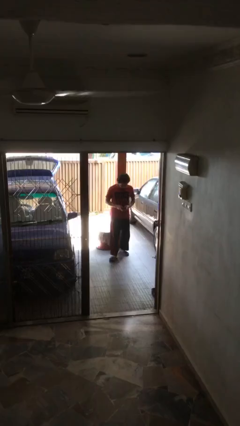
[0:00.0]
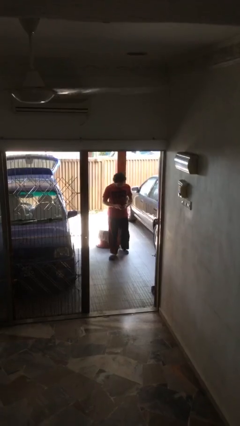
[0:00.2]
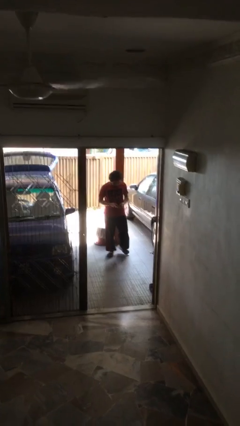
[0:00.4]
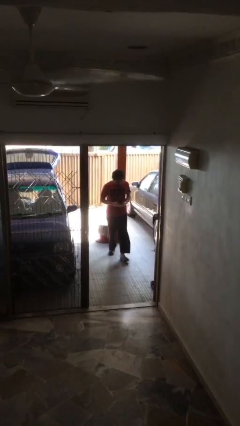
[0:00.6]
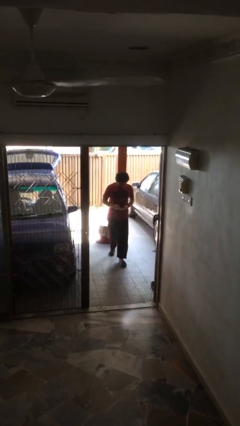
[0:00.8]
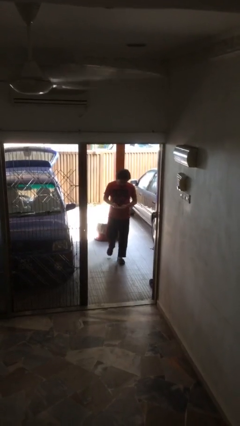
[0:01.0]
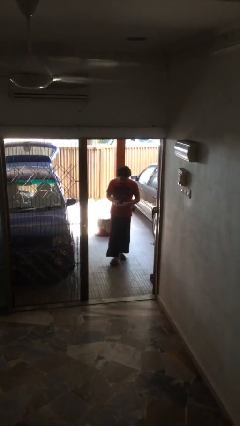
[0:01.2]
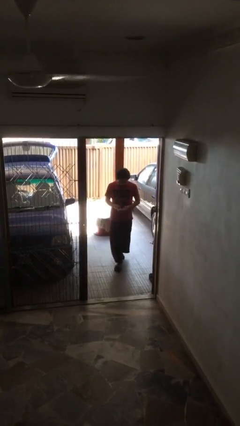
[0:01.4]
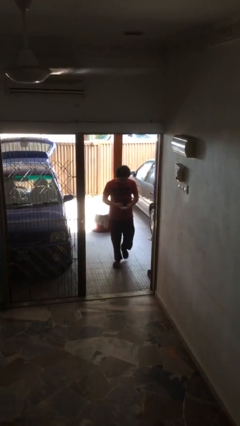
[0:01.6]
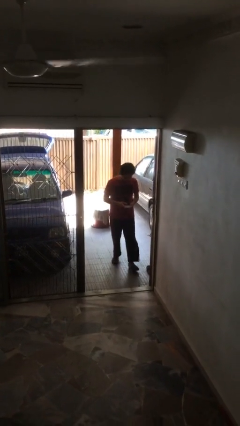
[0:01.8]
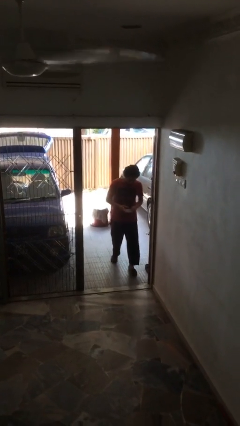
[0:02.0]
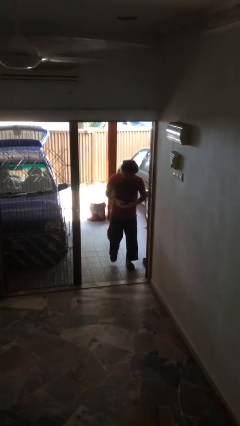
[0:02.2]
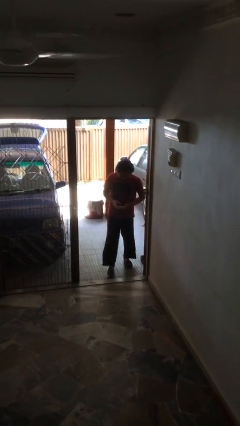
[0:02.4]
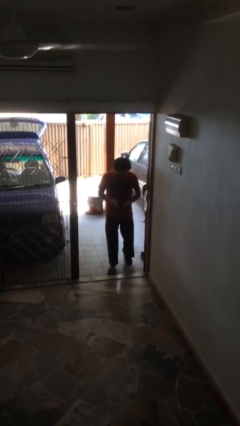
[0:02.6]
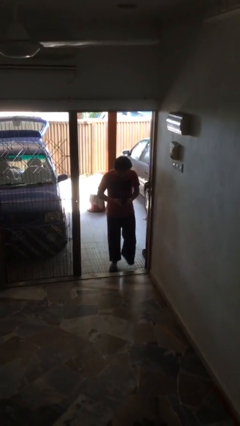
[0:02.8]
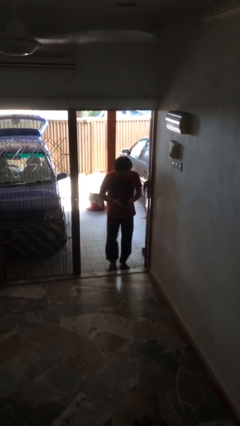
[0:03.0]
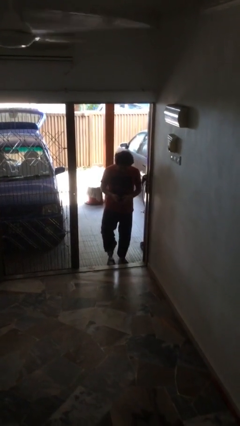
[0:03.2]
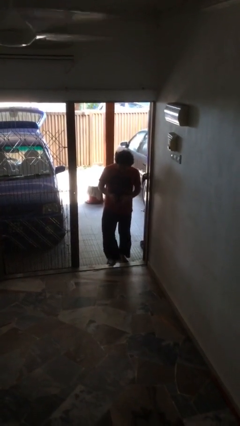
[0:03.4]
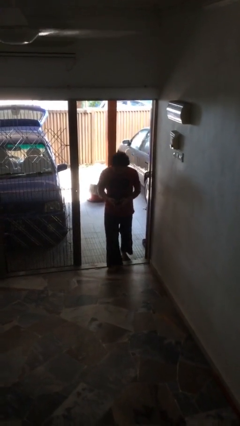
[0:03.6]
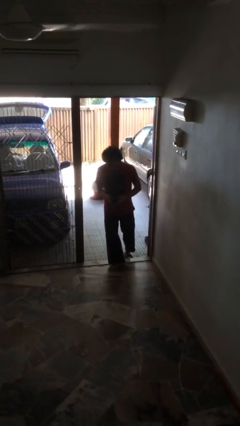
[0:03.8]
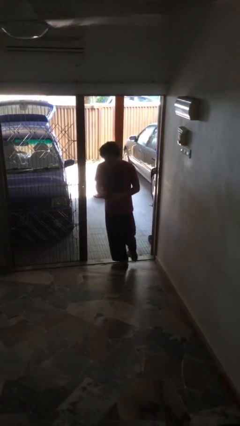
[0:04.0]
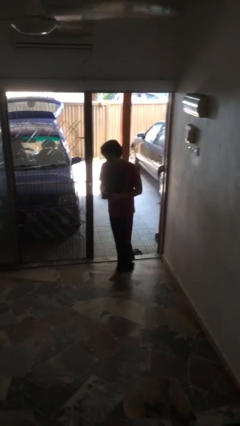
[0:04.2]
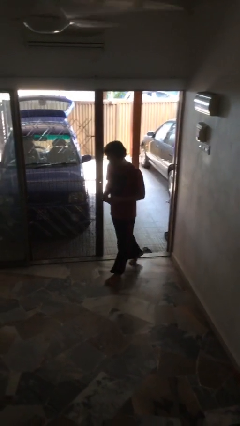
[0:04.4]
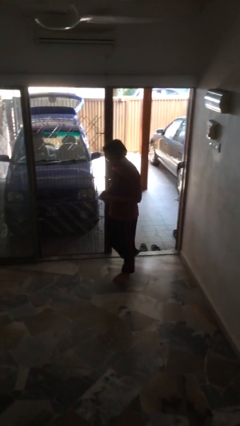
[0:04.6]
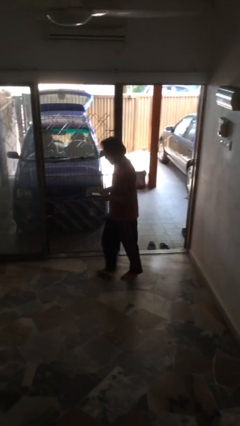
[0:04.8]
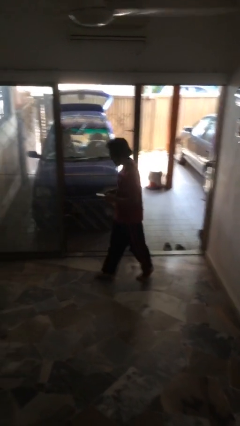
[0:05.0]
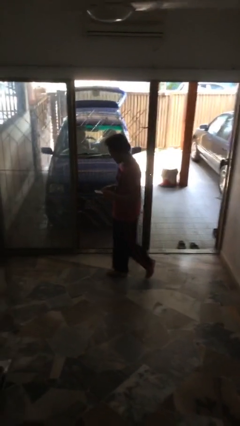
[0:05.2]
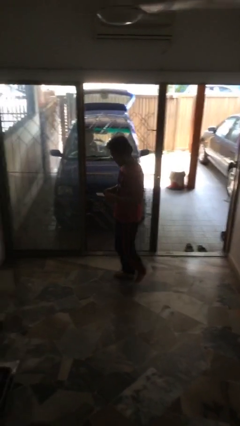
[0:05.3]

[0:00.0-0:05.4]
person enters scene through structure

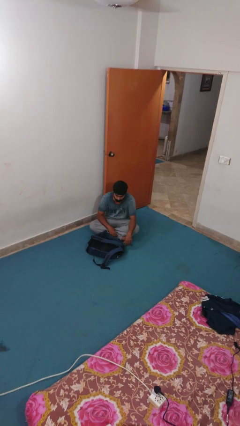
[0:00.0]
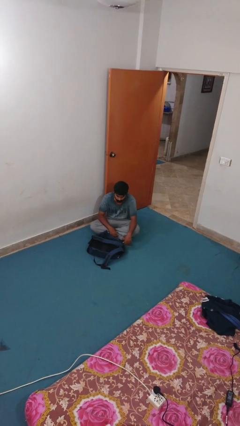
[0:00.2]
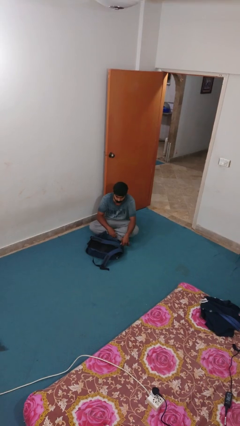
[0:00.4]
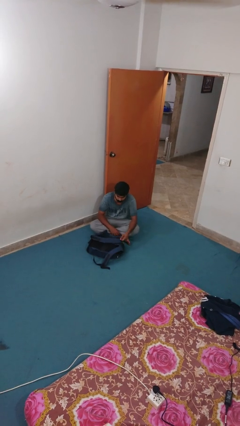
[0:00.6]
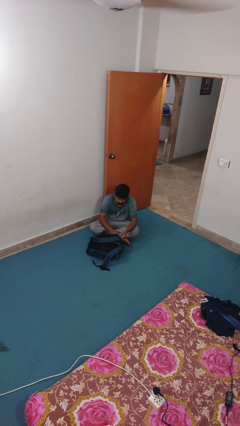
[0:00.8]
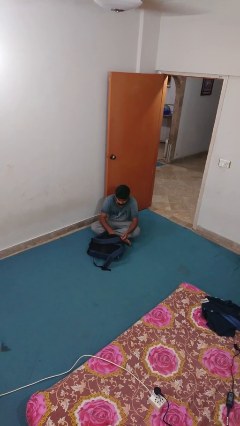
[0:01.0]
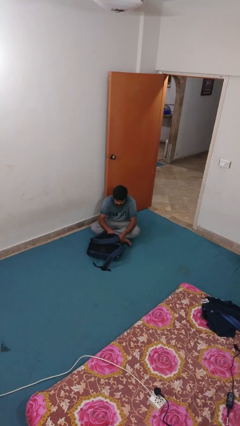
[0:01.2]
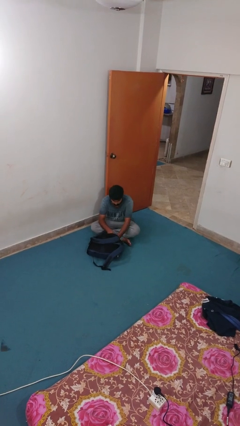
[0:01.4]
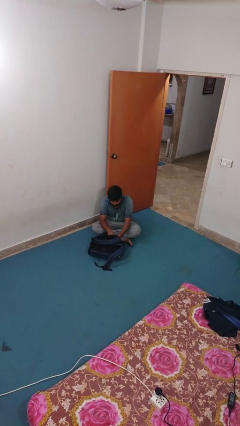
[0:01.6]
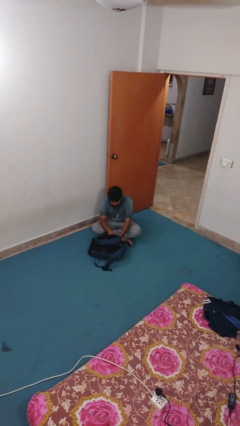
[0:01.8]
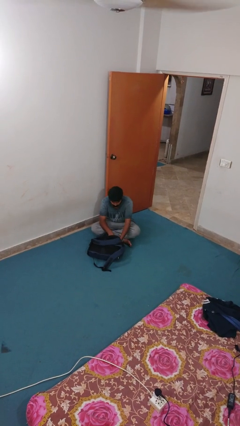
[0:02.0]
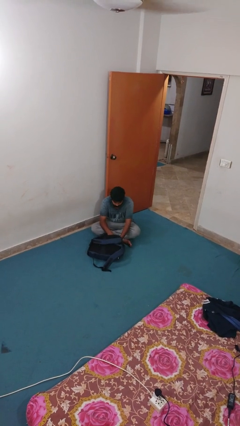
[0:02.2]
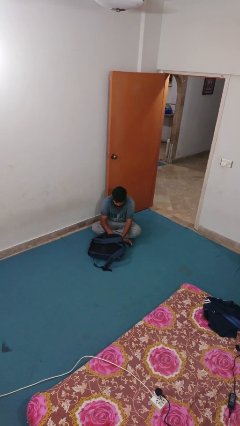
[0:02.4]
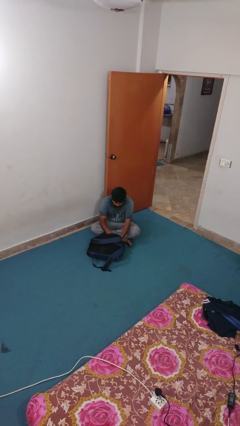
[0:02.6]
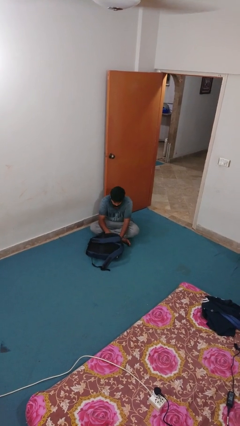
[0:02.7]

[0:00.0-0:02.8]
person searches in backpack

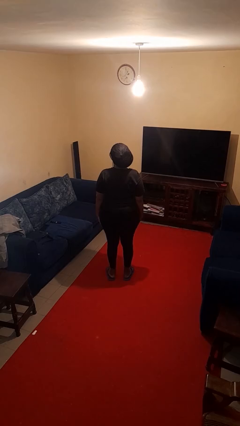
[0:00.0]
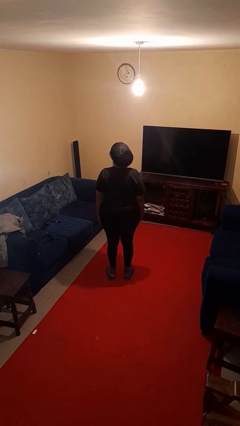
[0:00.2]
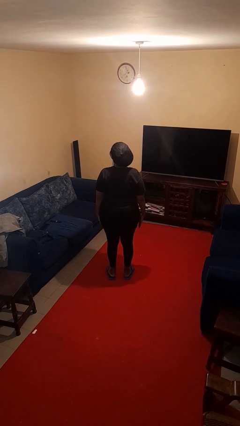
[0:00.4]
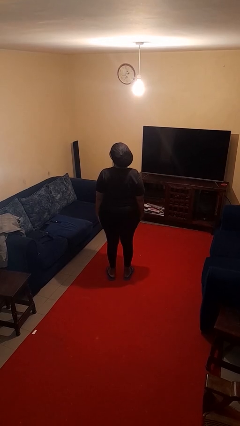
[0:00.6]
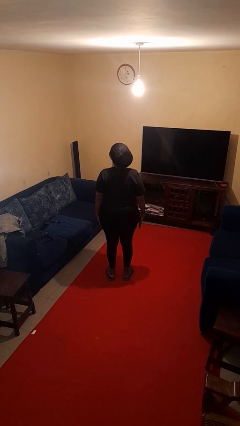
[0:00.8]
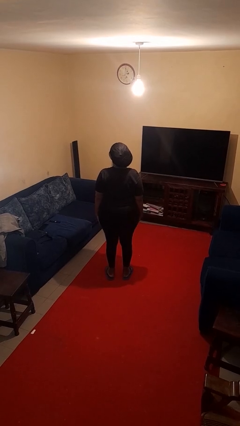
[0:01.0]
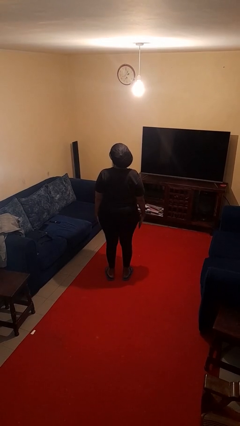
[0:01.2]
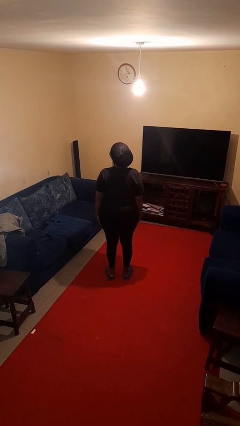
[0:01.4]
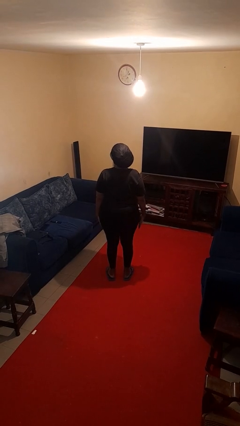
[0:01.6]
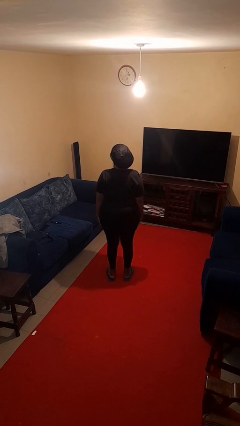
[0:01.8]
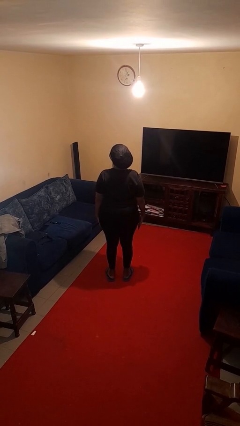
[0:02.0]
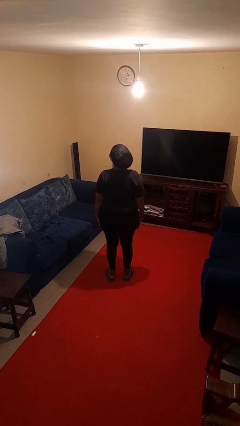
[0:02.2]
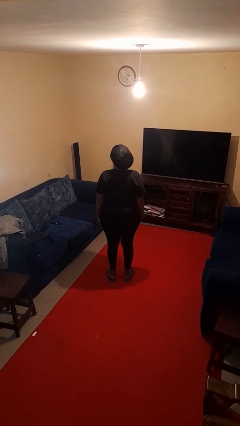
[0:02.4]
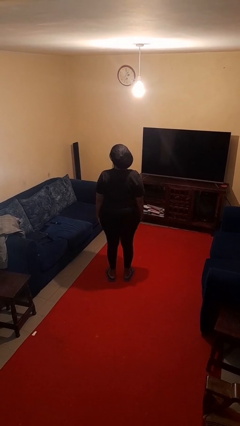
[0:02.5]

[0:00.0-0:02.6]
person slaps hands on thighs

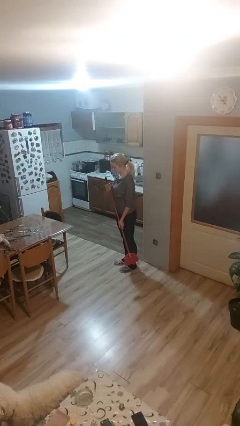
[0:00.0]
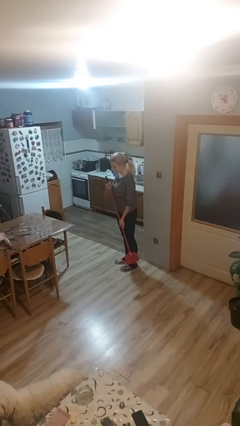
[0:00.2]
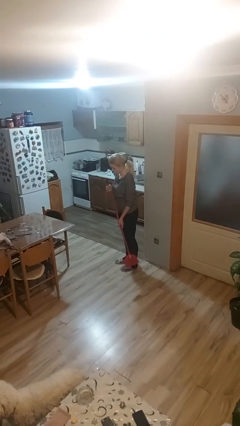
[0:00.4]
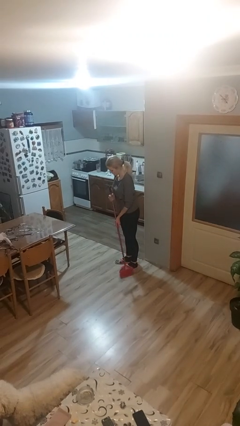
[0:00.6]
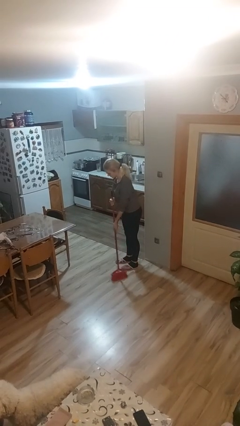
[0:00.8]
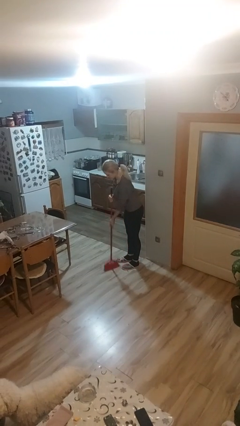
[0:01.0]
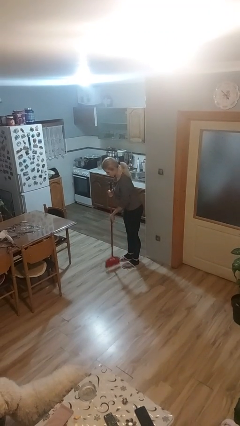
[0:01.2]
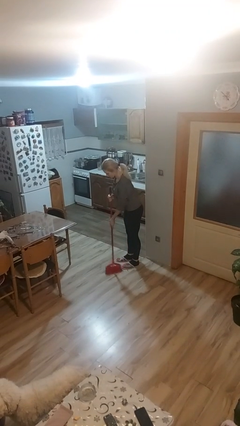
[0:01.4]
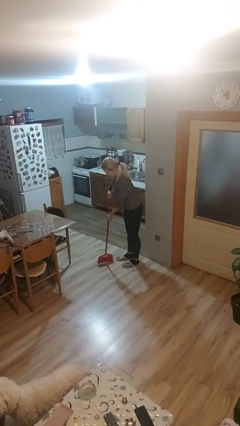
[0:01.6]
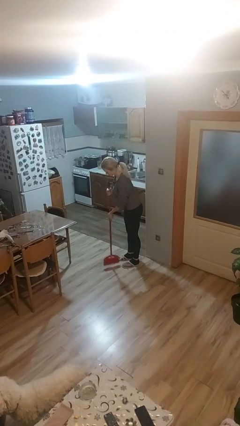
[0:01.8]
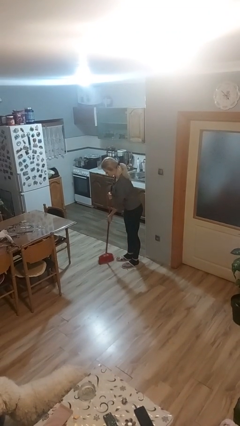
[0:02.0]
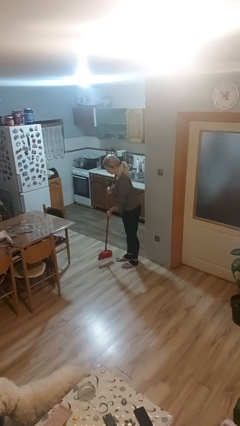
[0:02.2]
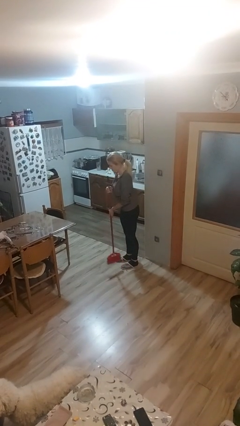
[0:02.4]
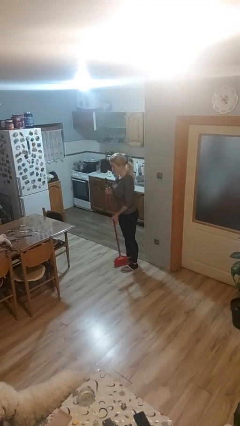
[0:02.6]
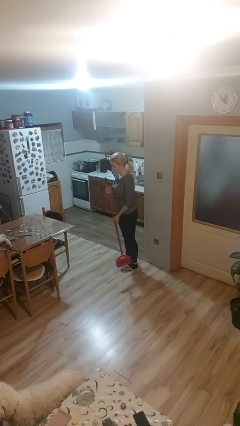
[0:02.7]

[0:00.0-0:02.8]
person sweeps floor

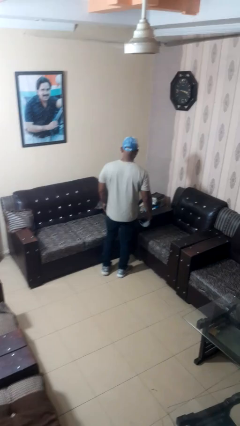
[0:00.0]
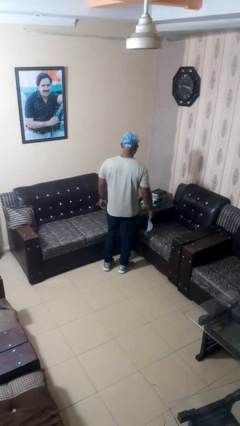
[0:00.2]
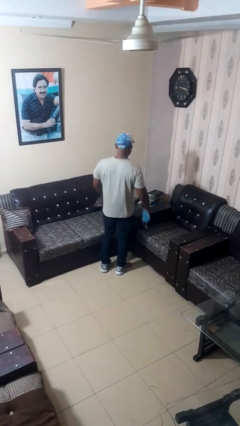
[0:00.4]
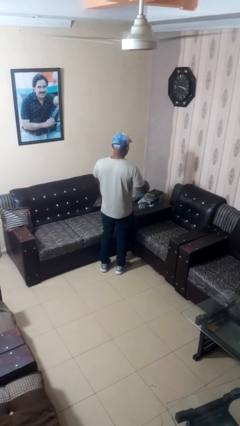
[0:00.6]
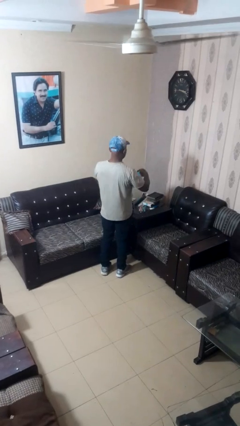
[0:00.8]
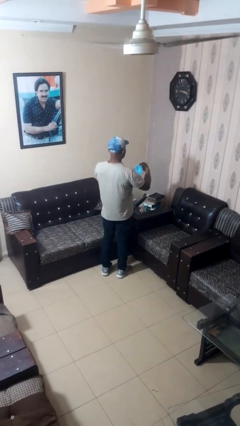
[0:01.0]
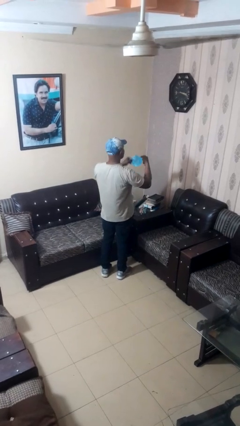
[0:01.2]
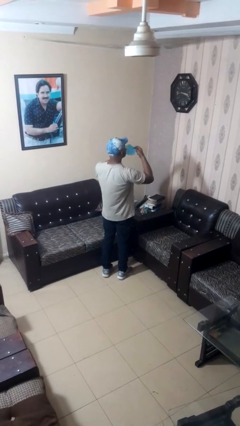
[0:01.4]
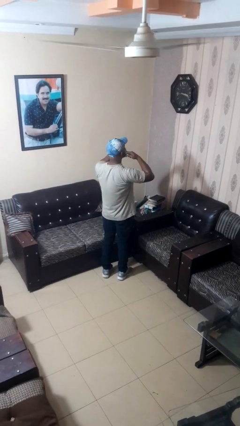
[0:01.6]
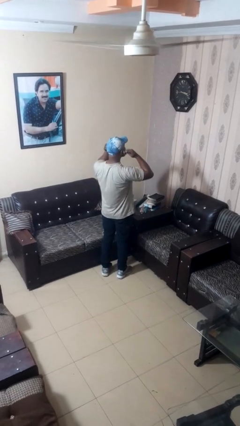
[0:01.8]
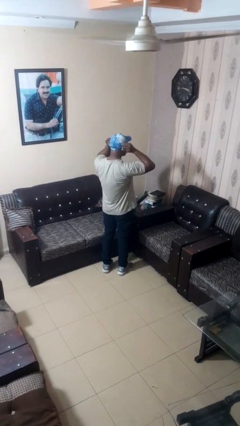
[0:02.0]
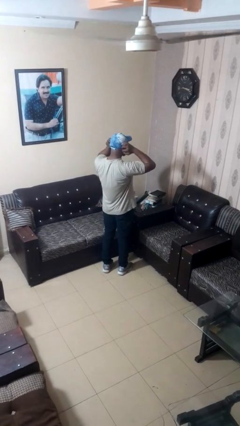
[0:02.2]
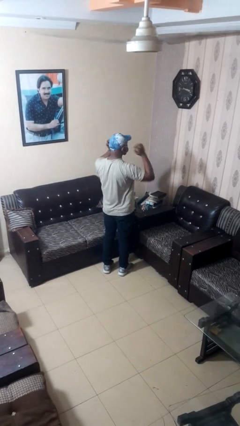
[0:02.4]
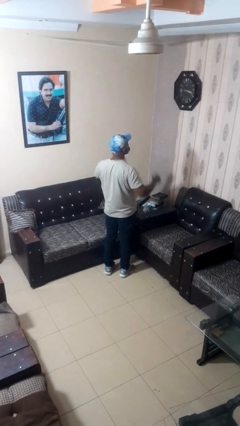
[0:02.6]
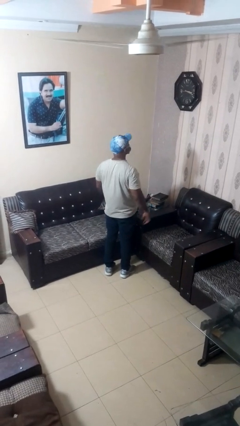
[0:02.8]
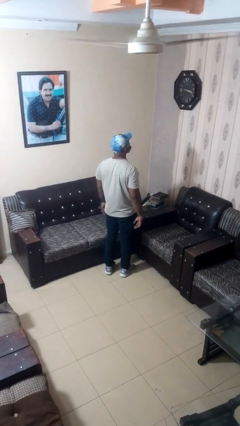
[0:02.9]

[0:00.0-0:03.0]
person puts on facemask

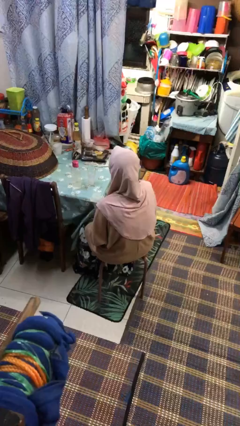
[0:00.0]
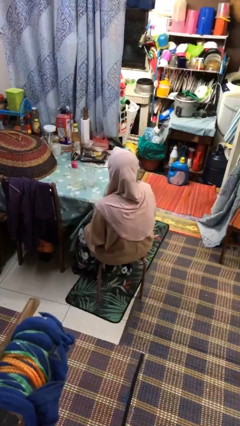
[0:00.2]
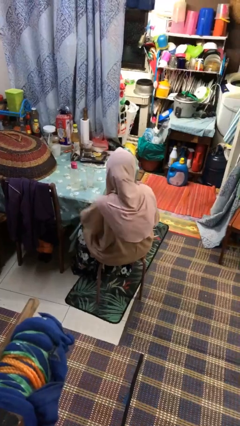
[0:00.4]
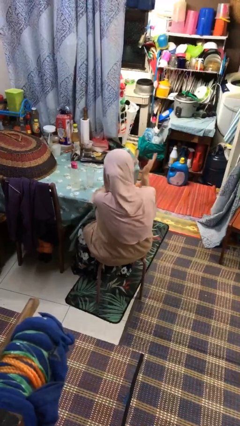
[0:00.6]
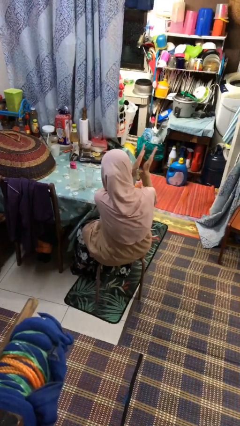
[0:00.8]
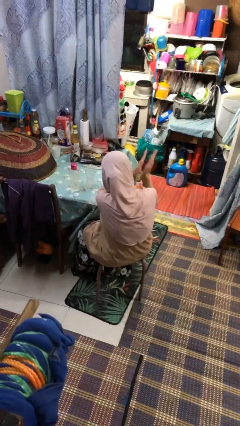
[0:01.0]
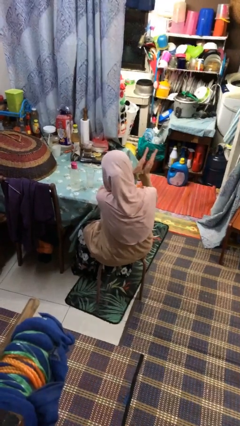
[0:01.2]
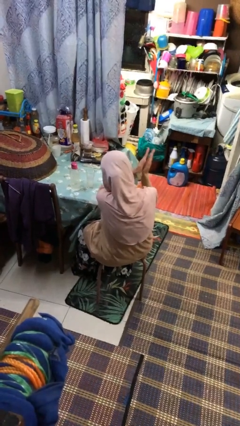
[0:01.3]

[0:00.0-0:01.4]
person claps hands
